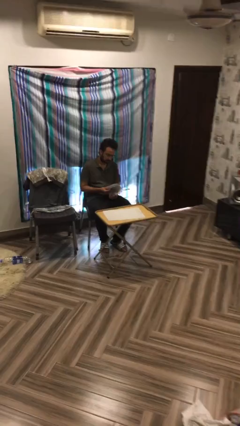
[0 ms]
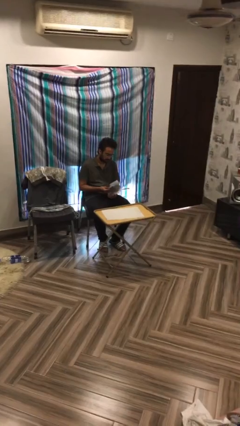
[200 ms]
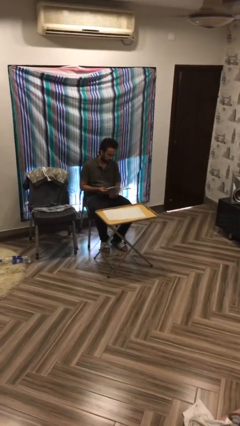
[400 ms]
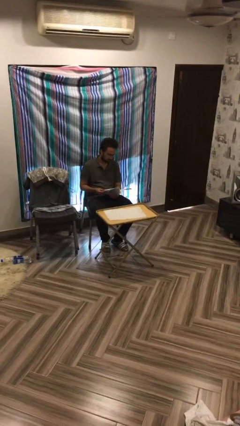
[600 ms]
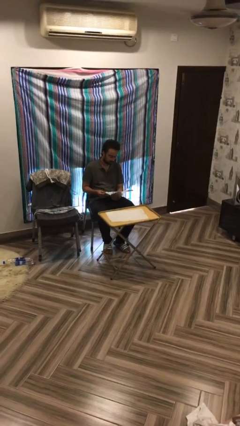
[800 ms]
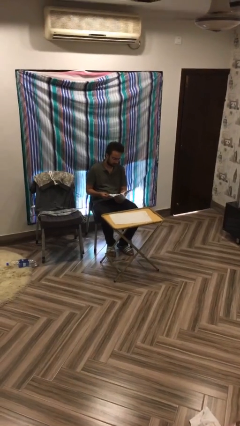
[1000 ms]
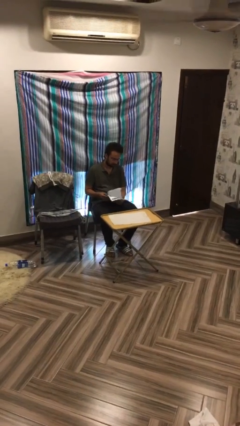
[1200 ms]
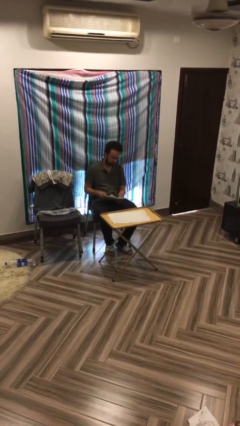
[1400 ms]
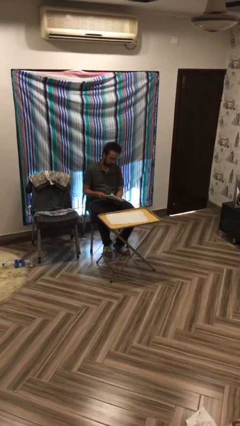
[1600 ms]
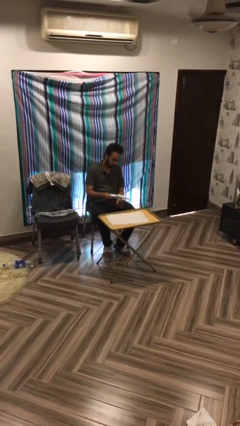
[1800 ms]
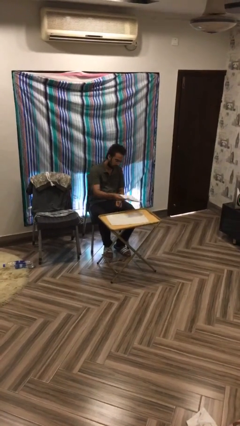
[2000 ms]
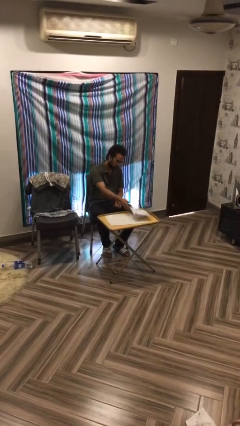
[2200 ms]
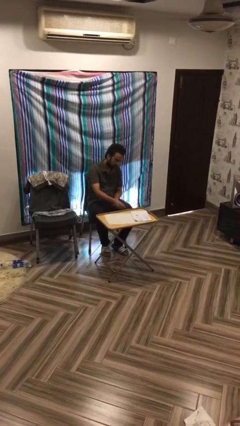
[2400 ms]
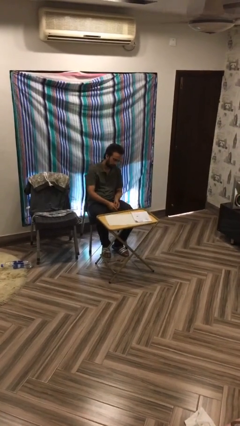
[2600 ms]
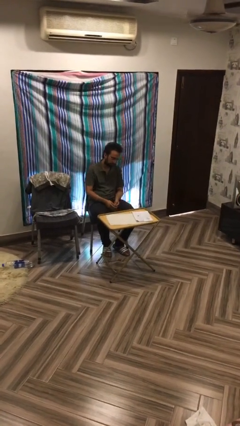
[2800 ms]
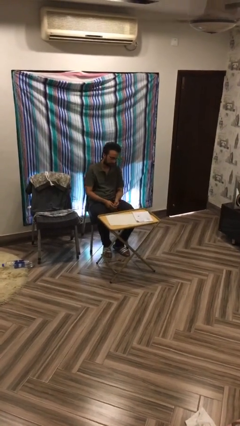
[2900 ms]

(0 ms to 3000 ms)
person puts down object on table

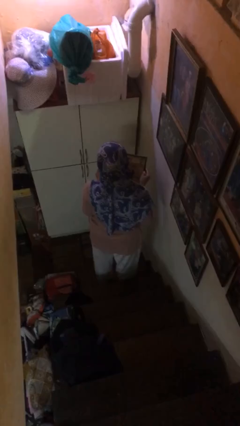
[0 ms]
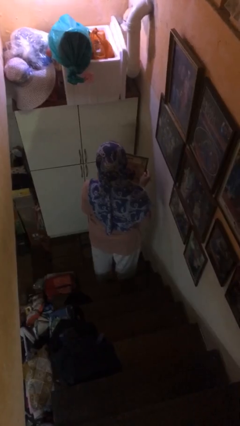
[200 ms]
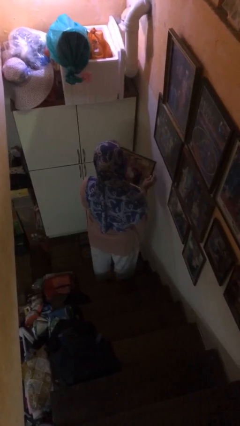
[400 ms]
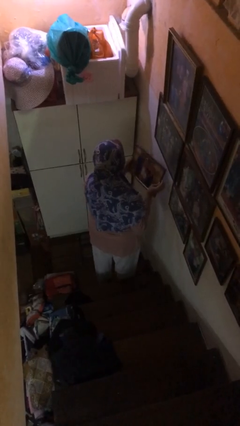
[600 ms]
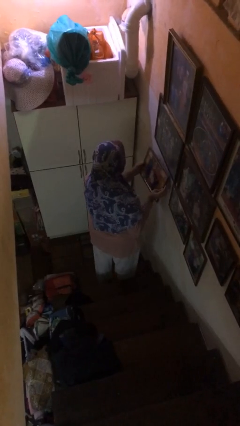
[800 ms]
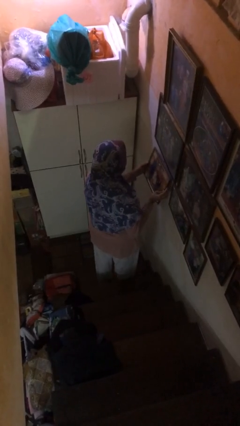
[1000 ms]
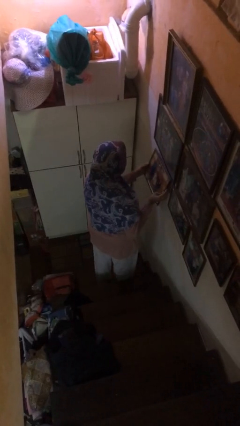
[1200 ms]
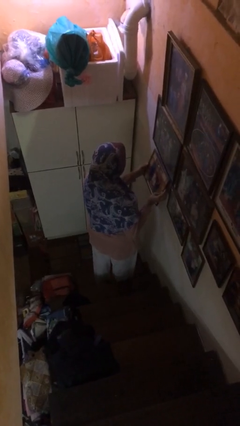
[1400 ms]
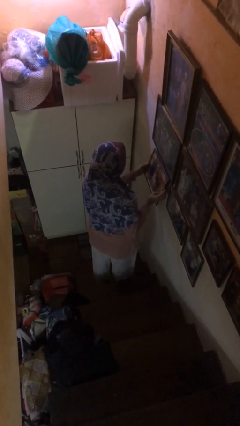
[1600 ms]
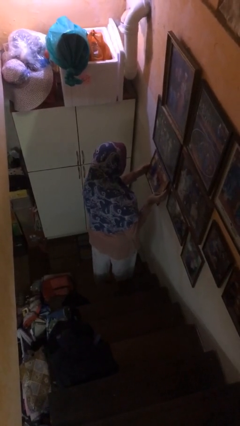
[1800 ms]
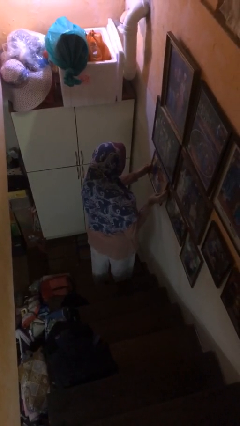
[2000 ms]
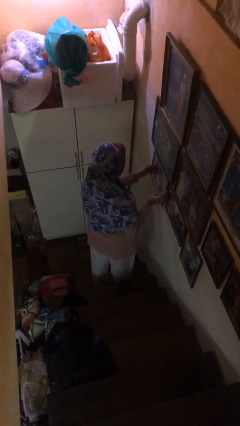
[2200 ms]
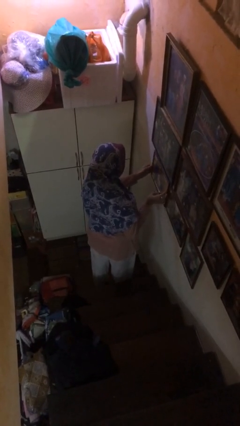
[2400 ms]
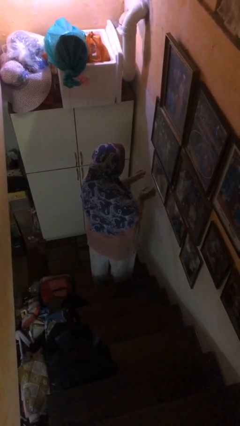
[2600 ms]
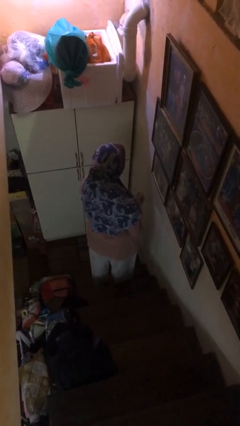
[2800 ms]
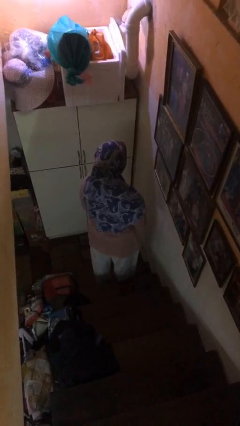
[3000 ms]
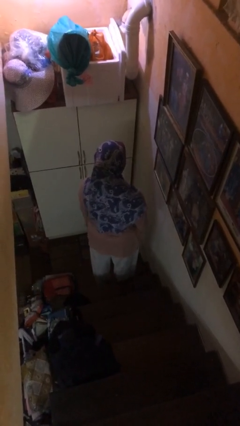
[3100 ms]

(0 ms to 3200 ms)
person takes down picture frame

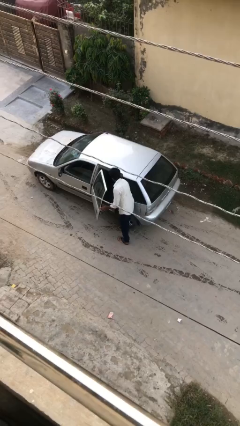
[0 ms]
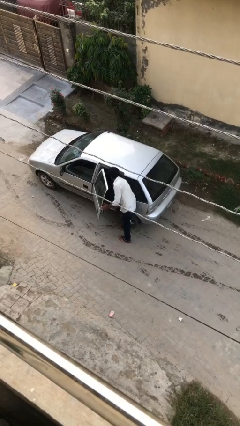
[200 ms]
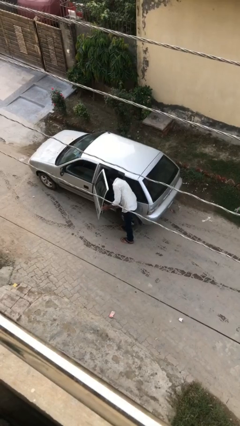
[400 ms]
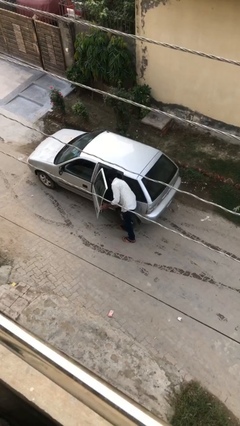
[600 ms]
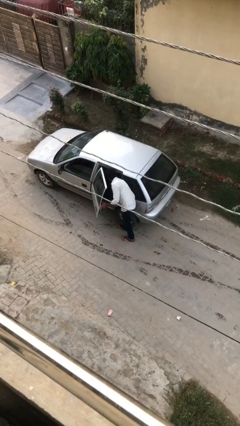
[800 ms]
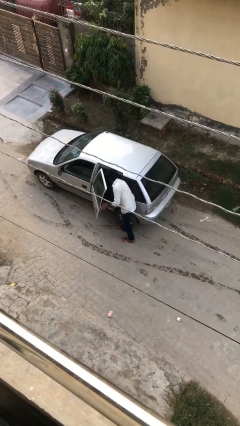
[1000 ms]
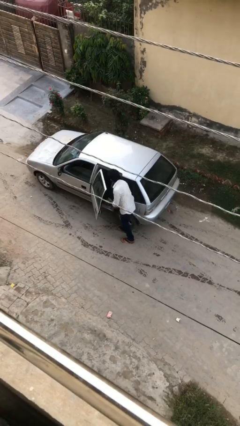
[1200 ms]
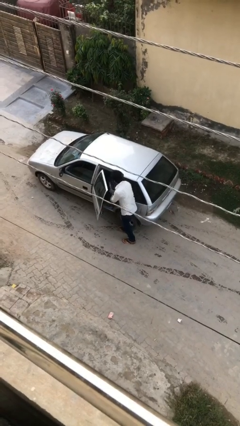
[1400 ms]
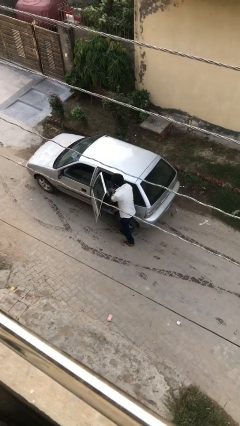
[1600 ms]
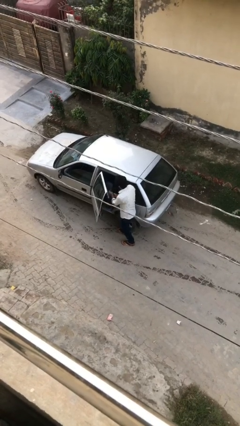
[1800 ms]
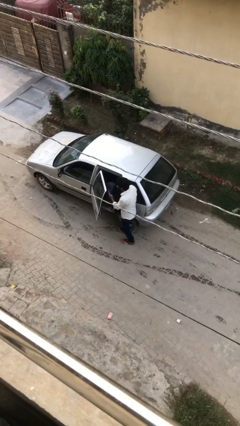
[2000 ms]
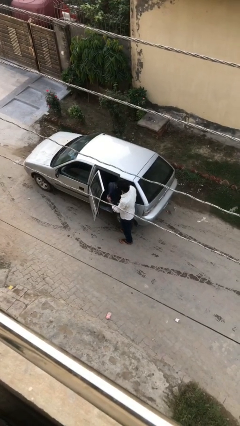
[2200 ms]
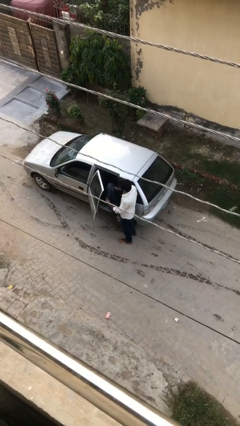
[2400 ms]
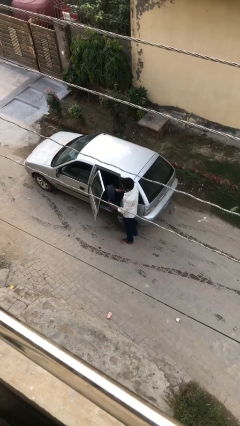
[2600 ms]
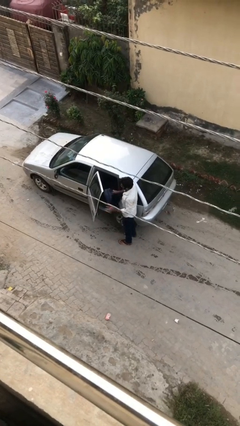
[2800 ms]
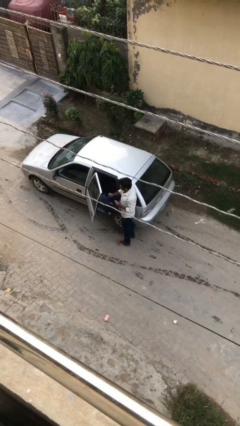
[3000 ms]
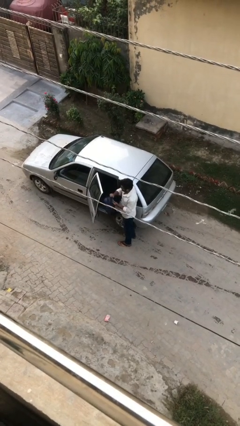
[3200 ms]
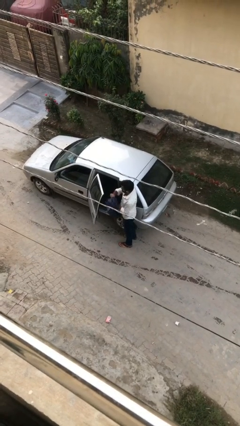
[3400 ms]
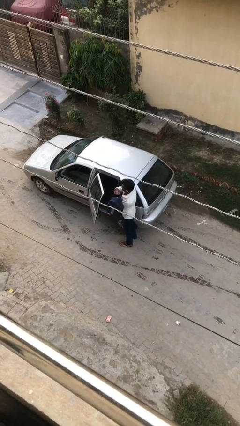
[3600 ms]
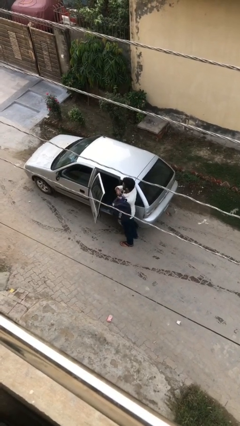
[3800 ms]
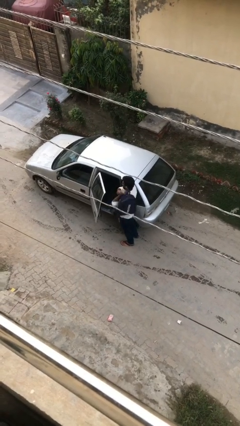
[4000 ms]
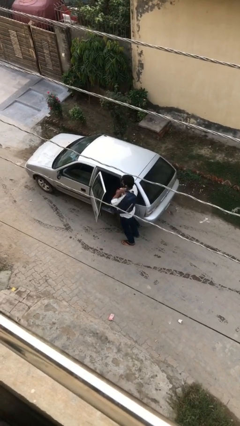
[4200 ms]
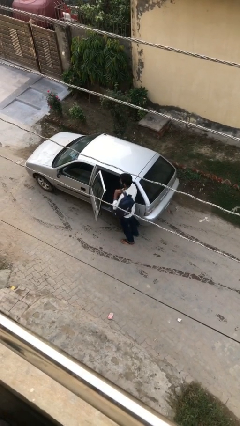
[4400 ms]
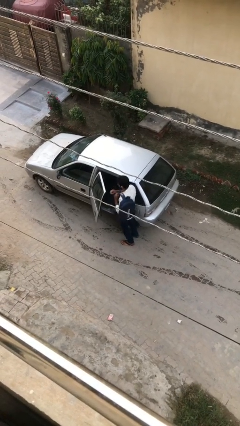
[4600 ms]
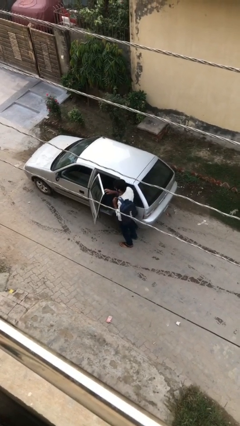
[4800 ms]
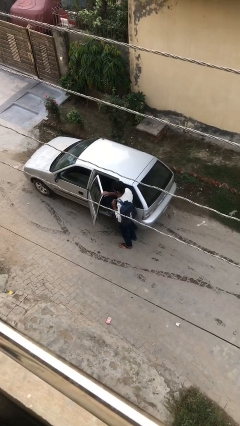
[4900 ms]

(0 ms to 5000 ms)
person unloads car

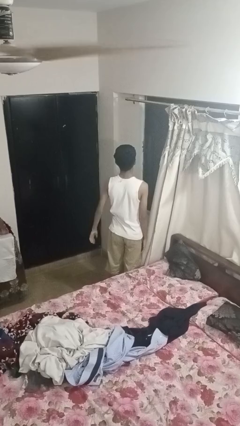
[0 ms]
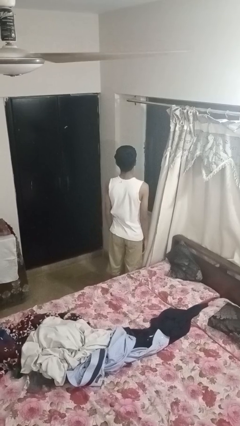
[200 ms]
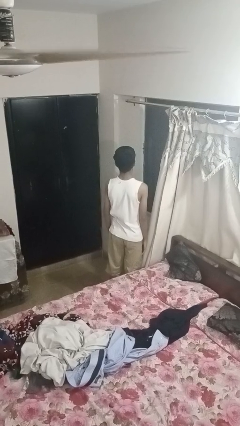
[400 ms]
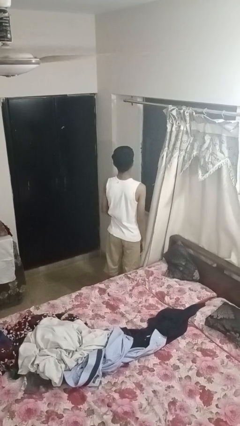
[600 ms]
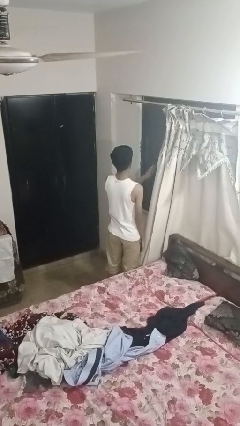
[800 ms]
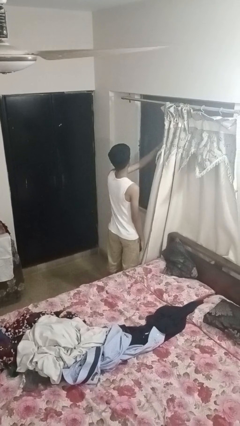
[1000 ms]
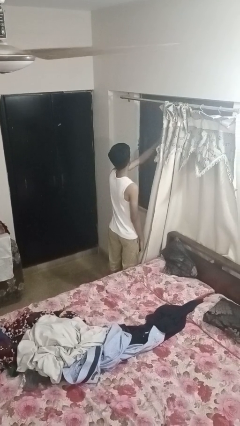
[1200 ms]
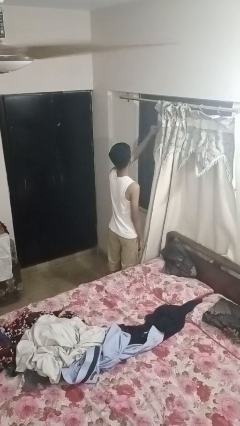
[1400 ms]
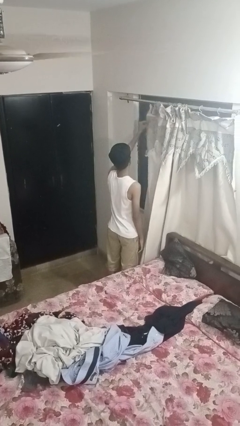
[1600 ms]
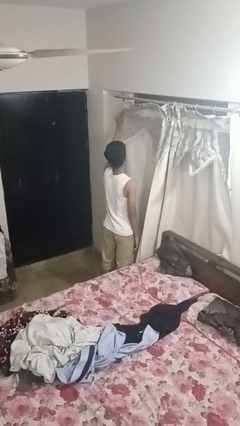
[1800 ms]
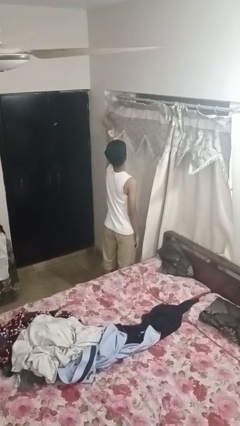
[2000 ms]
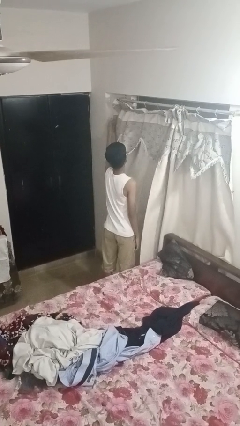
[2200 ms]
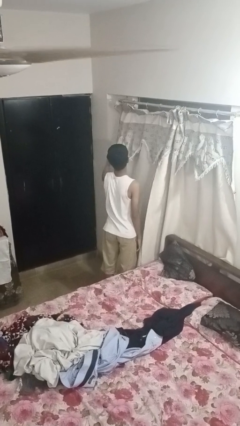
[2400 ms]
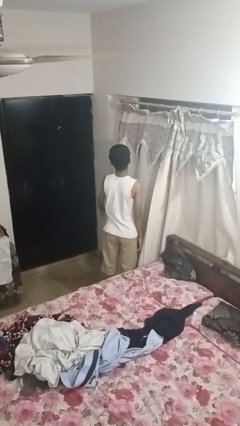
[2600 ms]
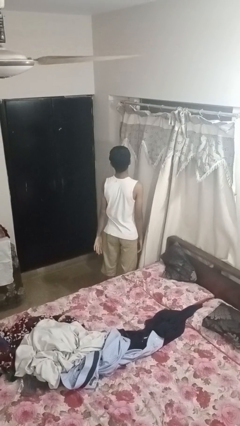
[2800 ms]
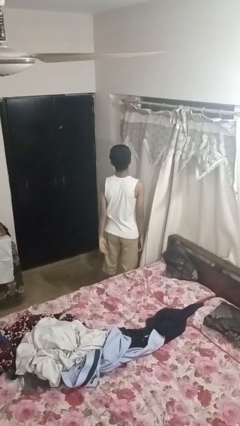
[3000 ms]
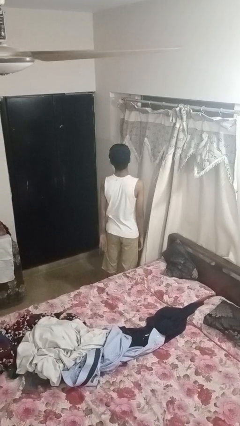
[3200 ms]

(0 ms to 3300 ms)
person closes curtains

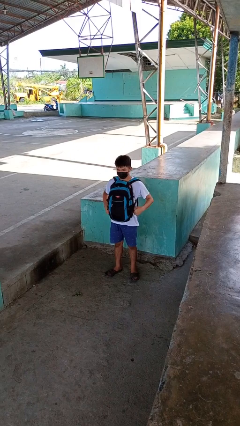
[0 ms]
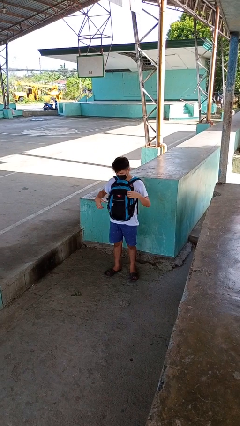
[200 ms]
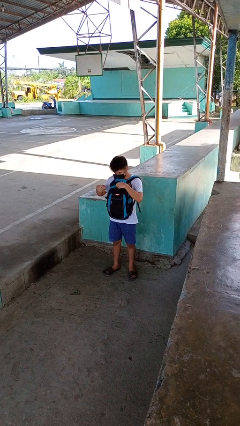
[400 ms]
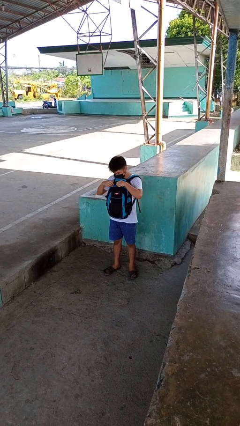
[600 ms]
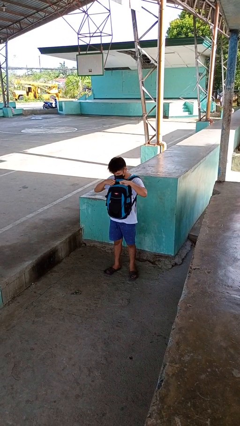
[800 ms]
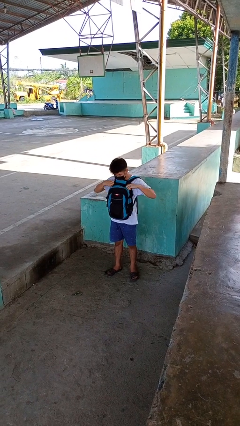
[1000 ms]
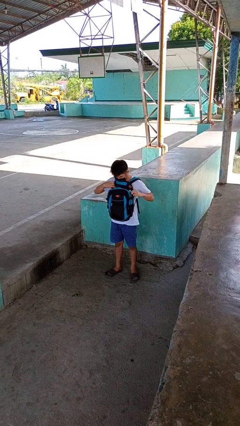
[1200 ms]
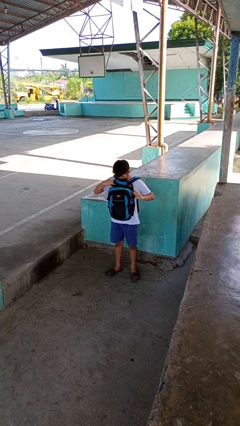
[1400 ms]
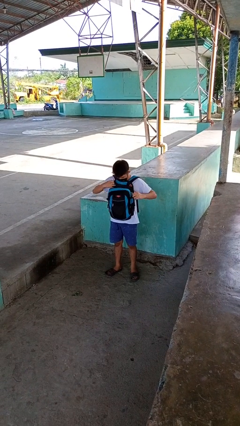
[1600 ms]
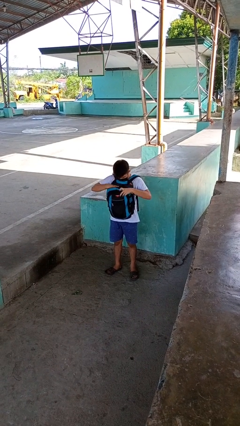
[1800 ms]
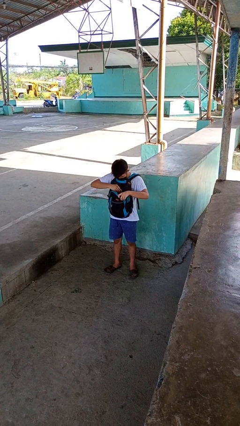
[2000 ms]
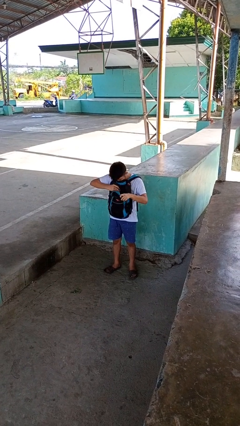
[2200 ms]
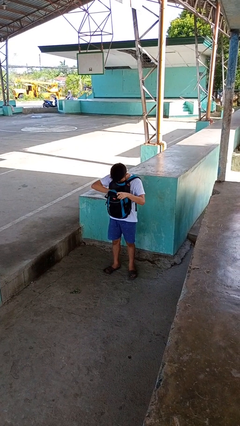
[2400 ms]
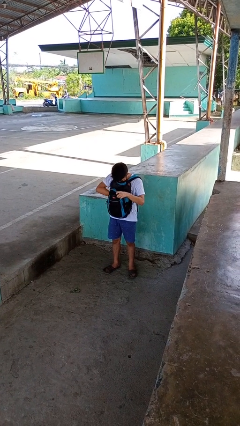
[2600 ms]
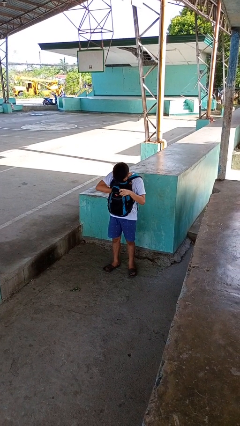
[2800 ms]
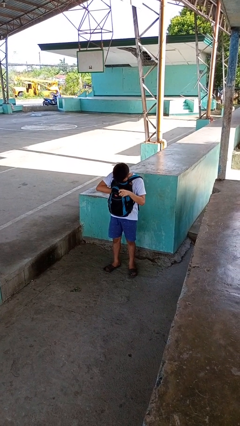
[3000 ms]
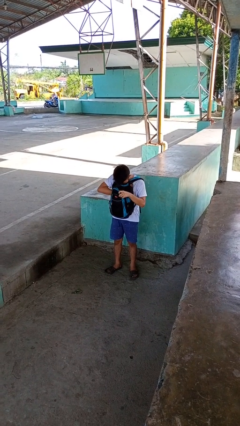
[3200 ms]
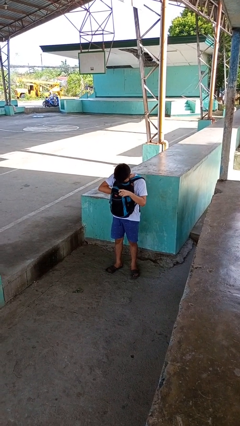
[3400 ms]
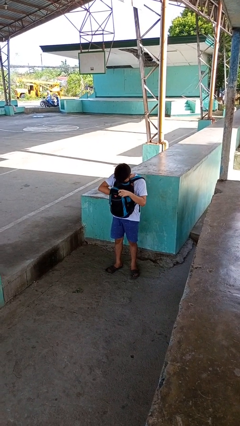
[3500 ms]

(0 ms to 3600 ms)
person searches in backpack
